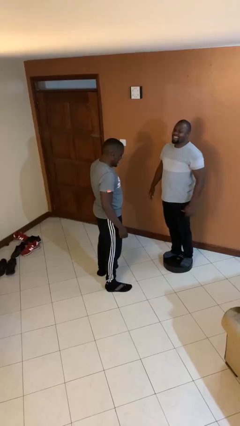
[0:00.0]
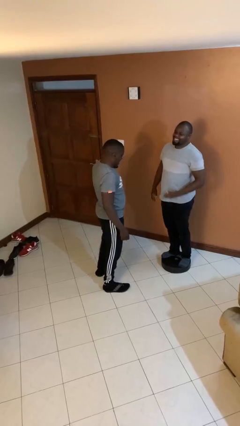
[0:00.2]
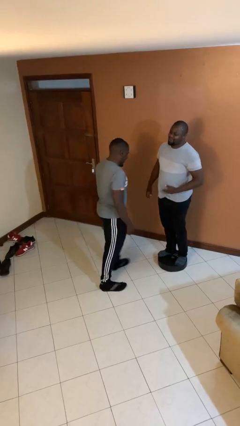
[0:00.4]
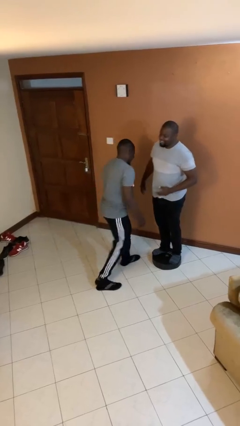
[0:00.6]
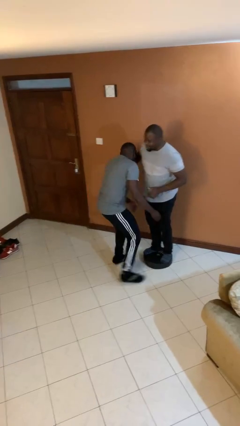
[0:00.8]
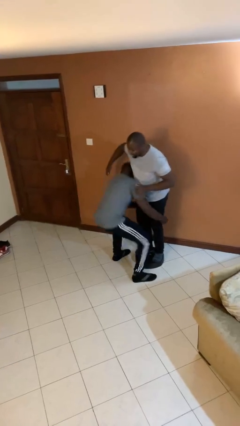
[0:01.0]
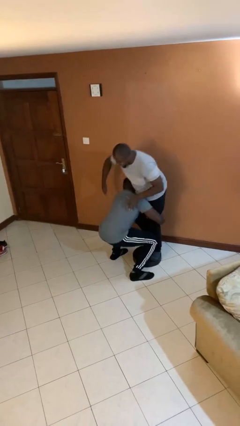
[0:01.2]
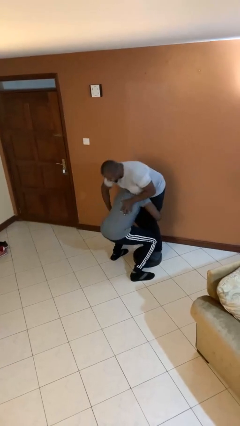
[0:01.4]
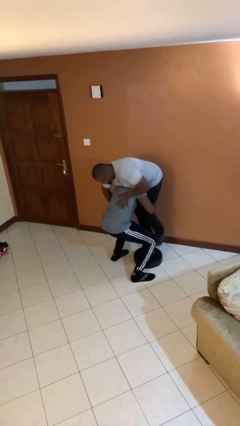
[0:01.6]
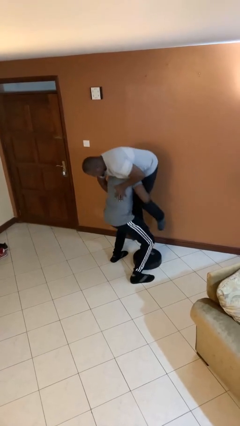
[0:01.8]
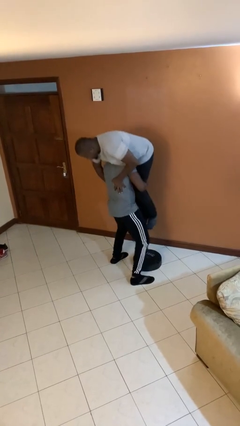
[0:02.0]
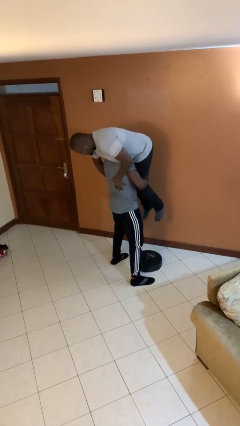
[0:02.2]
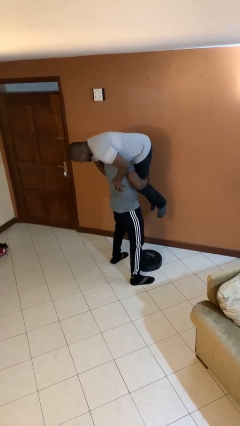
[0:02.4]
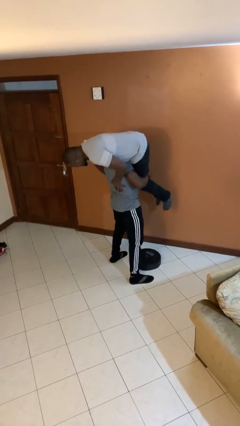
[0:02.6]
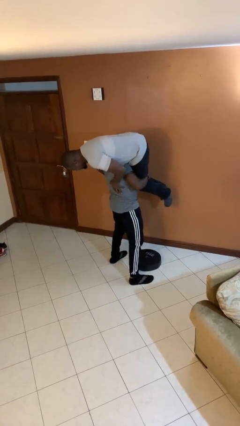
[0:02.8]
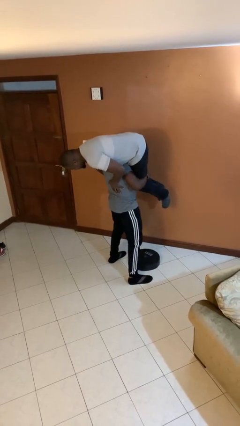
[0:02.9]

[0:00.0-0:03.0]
person carries person over shoulder

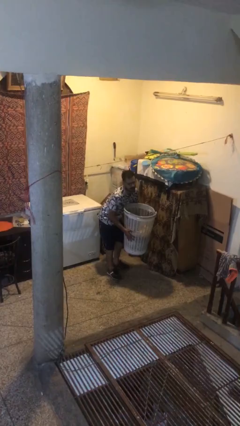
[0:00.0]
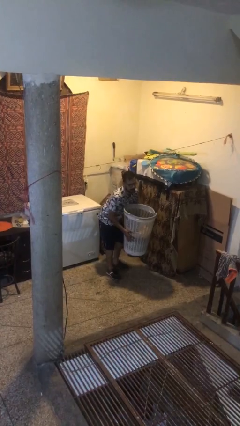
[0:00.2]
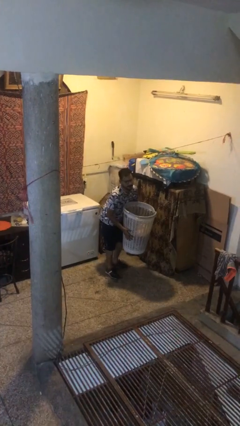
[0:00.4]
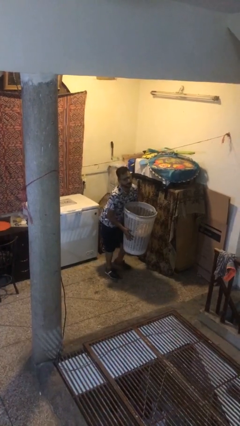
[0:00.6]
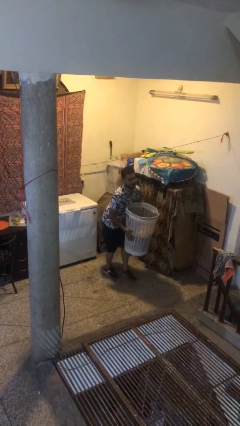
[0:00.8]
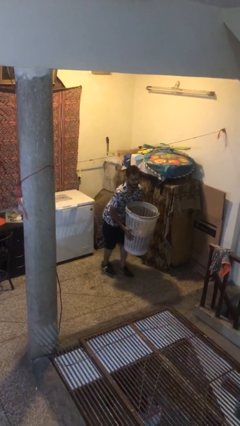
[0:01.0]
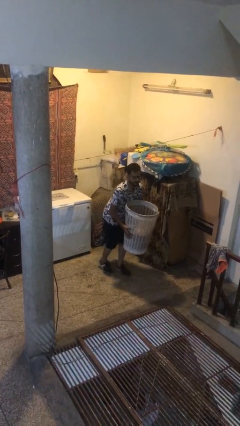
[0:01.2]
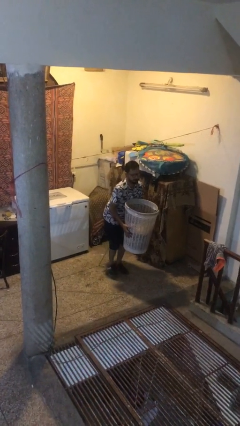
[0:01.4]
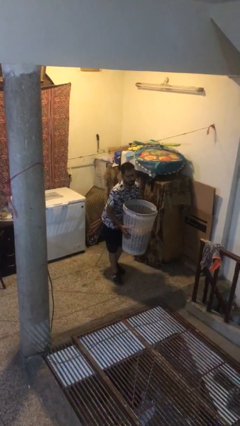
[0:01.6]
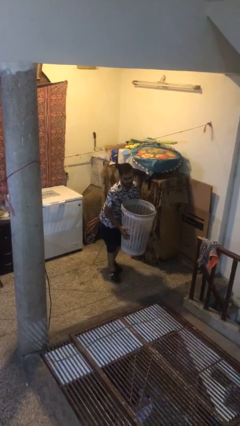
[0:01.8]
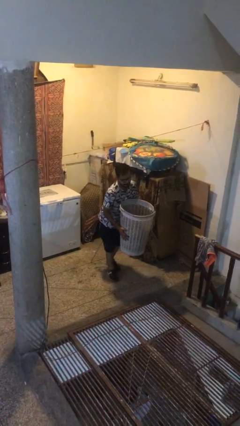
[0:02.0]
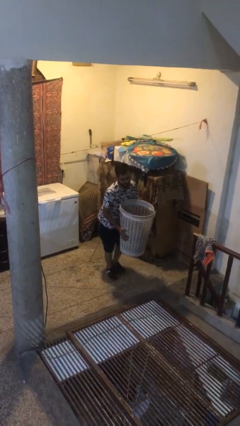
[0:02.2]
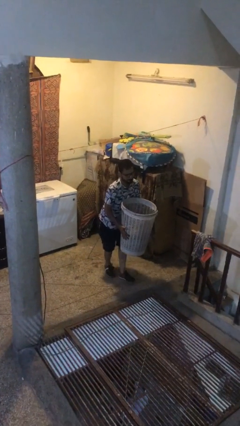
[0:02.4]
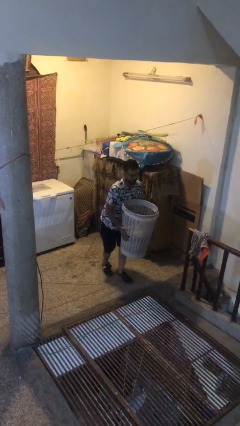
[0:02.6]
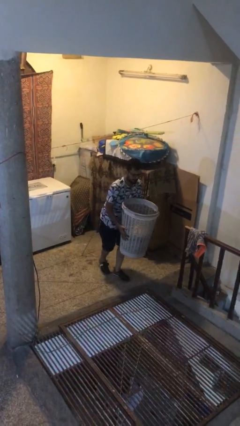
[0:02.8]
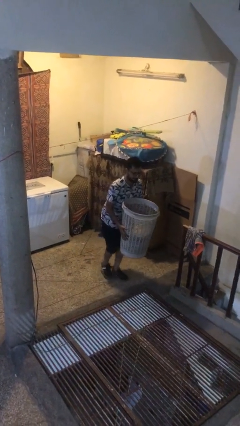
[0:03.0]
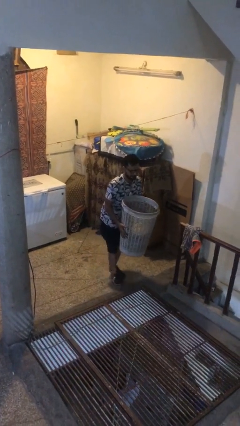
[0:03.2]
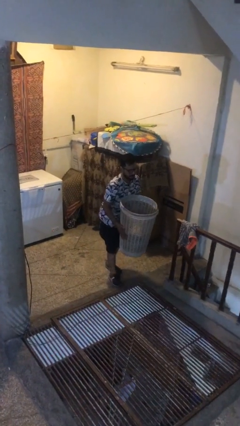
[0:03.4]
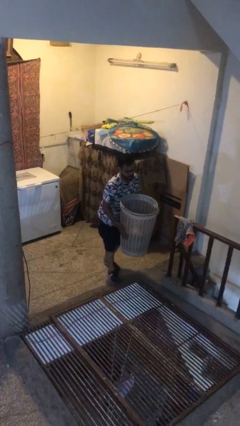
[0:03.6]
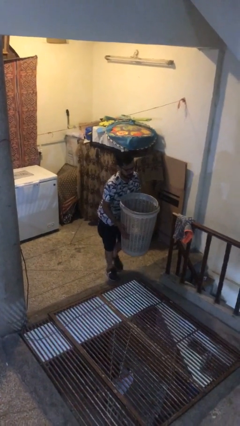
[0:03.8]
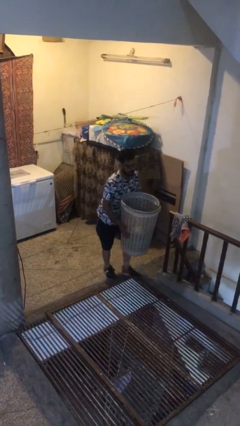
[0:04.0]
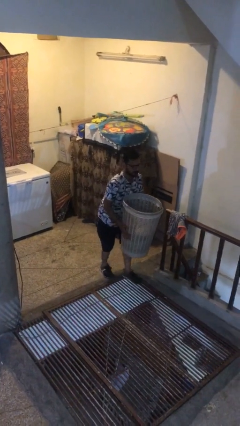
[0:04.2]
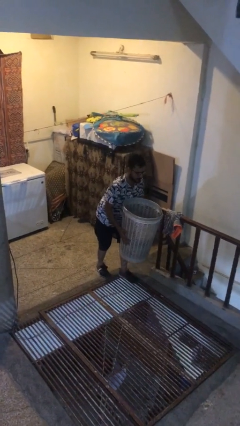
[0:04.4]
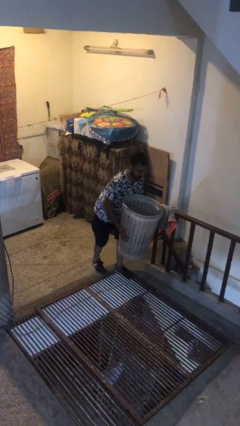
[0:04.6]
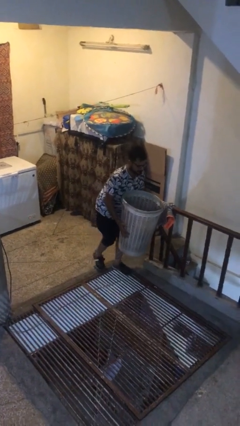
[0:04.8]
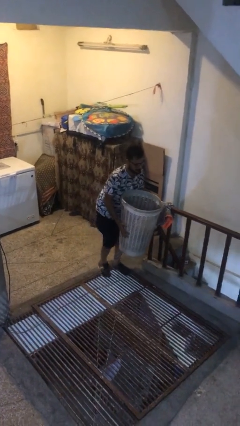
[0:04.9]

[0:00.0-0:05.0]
person carries heavy object

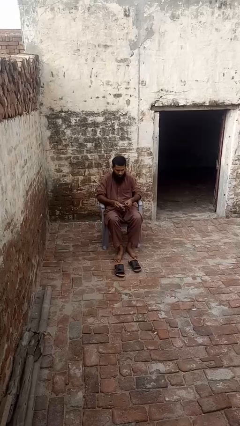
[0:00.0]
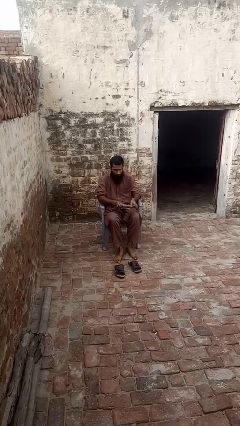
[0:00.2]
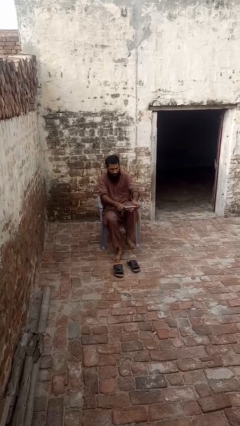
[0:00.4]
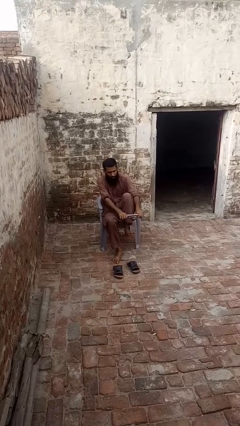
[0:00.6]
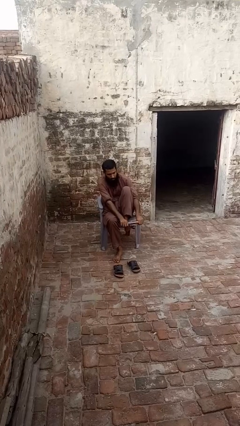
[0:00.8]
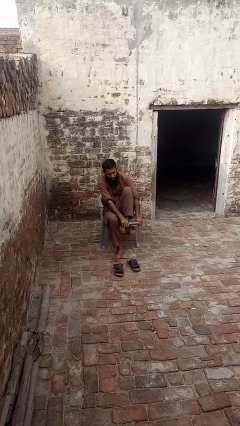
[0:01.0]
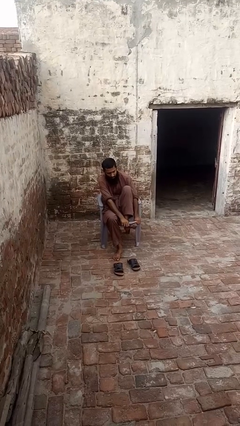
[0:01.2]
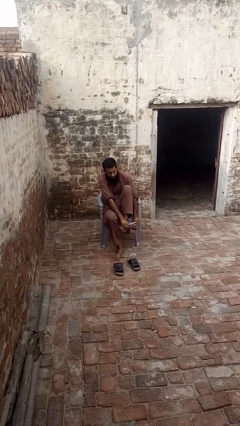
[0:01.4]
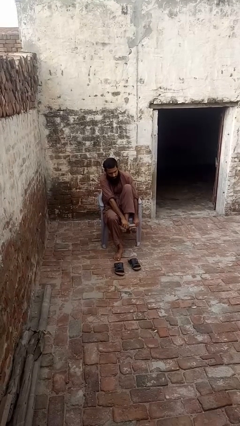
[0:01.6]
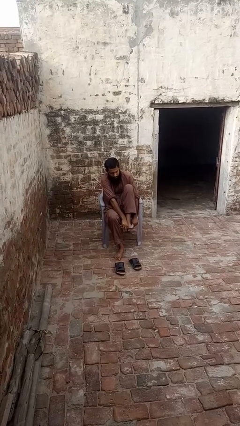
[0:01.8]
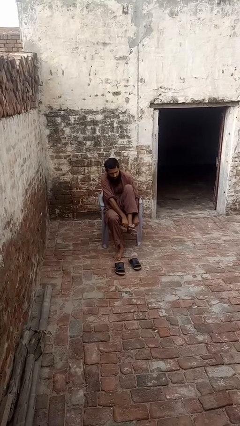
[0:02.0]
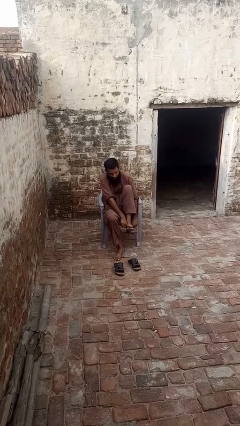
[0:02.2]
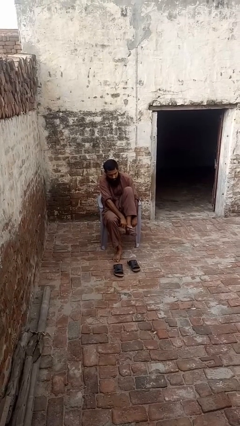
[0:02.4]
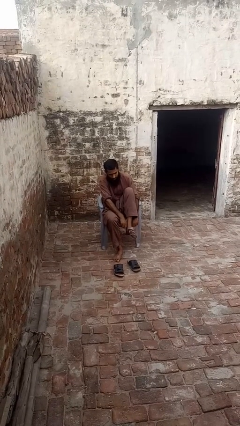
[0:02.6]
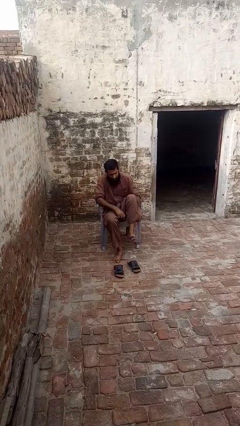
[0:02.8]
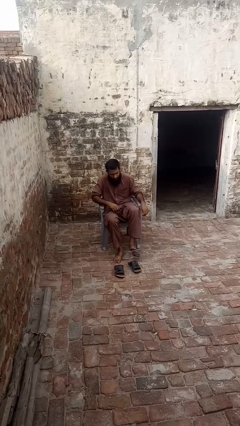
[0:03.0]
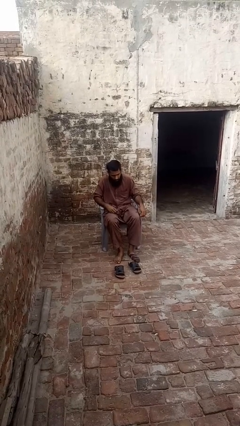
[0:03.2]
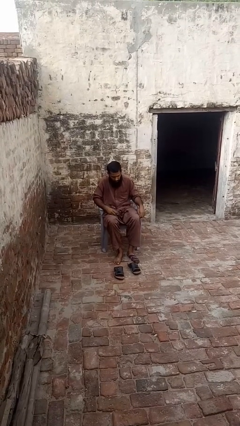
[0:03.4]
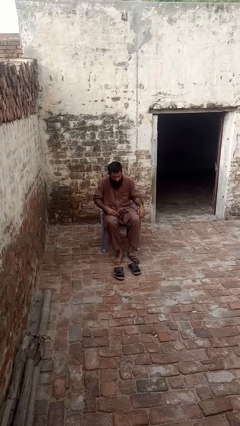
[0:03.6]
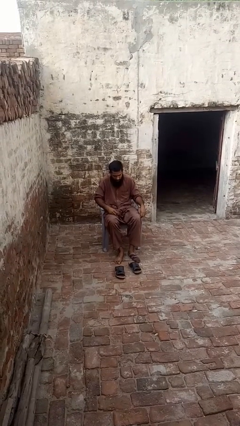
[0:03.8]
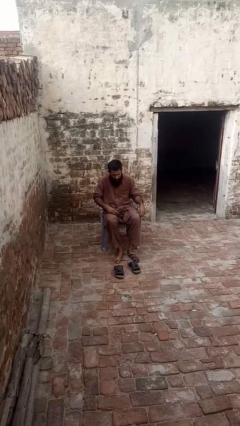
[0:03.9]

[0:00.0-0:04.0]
person puts on socks

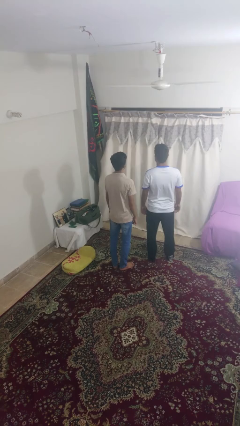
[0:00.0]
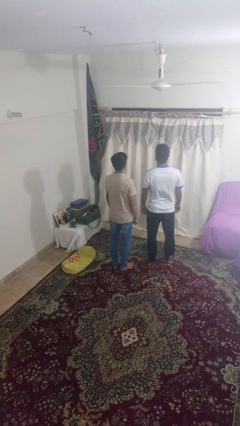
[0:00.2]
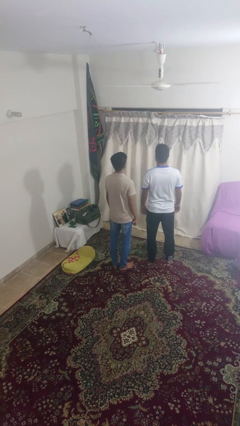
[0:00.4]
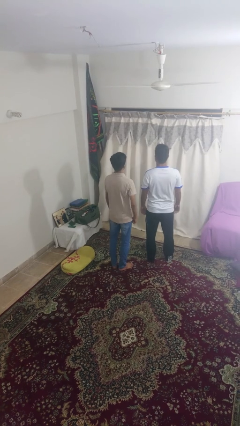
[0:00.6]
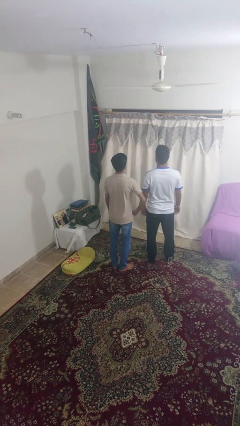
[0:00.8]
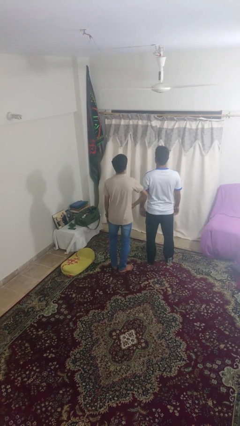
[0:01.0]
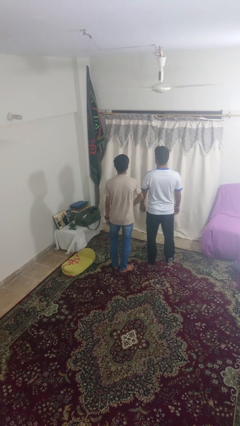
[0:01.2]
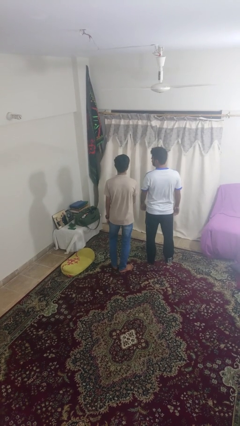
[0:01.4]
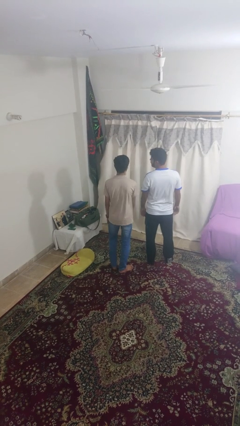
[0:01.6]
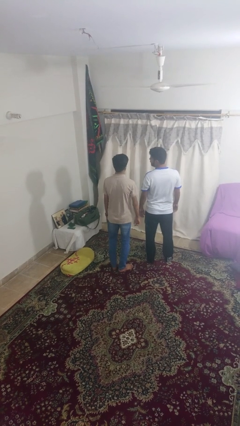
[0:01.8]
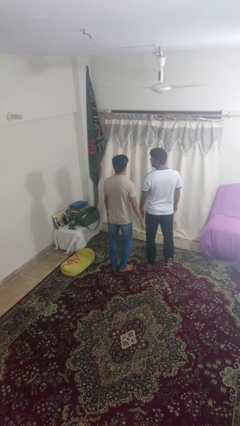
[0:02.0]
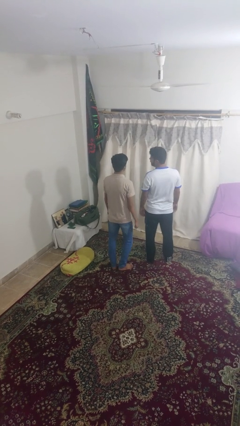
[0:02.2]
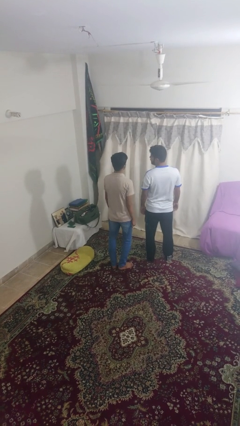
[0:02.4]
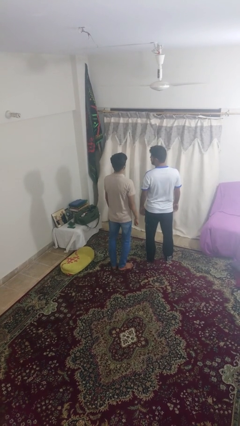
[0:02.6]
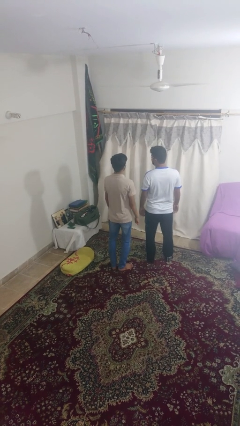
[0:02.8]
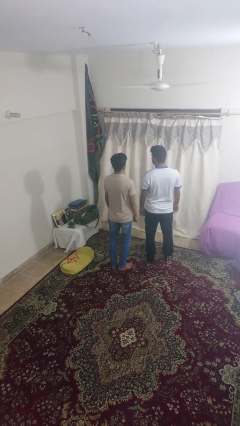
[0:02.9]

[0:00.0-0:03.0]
person nudges person with elbow

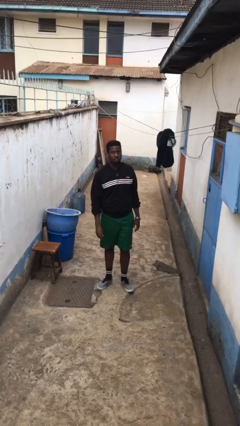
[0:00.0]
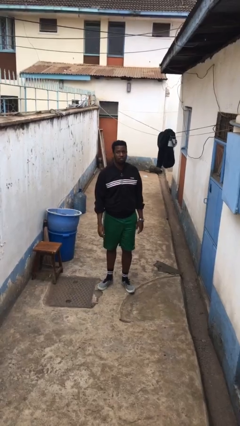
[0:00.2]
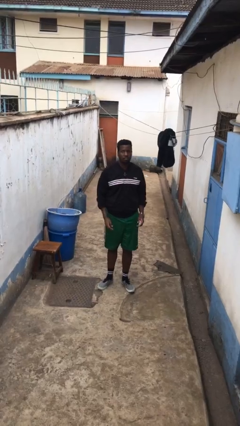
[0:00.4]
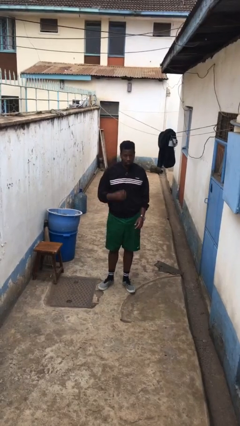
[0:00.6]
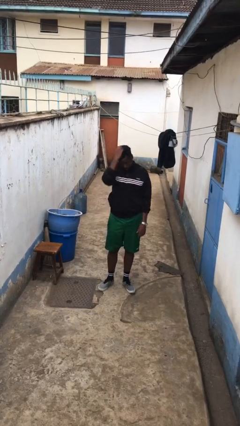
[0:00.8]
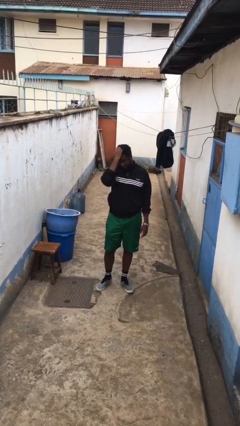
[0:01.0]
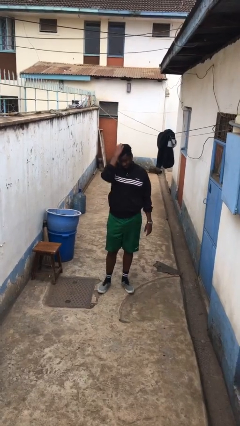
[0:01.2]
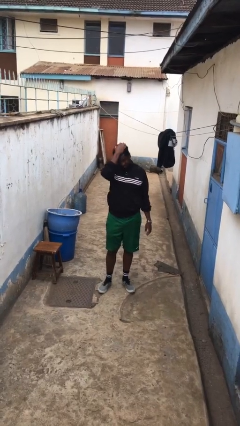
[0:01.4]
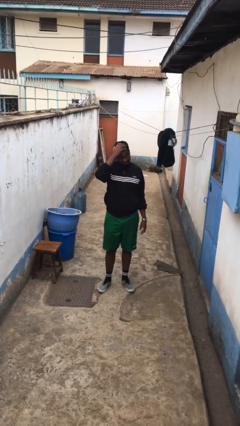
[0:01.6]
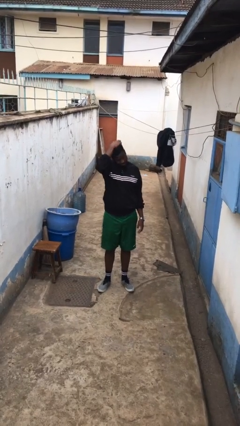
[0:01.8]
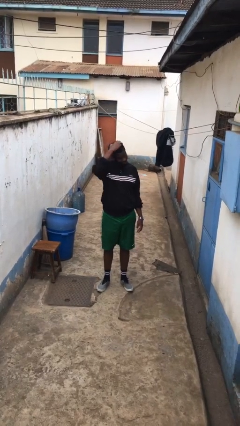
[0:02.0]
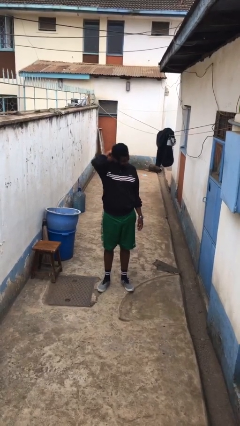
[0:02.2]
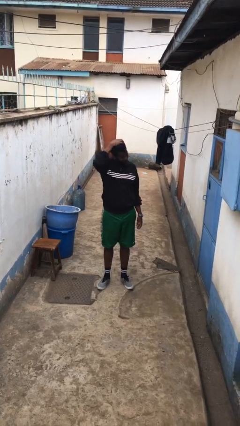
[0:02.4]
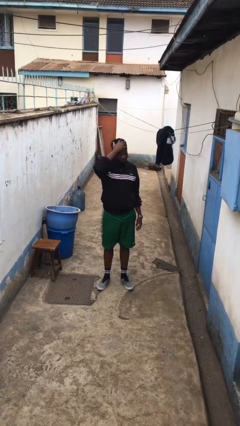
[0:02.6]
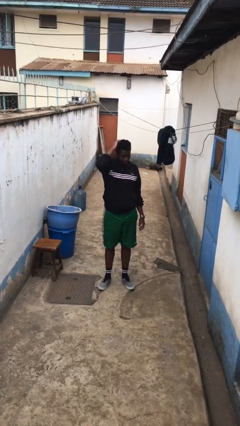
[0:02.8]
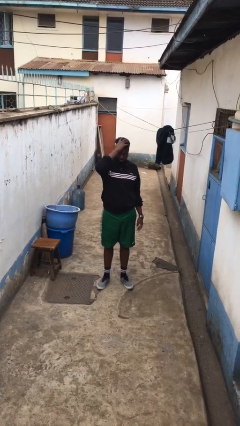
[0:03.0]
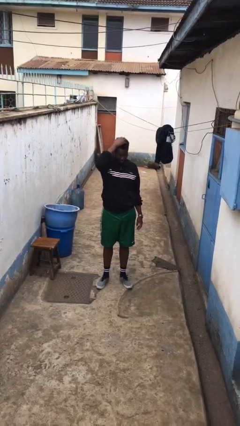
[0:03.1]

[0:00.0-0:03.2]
person scratches face
